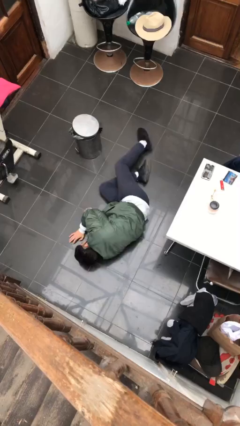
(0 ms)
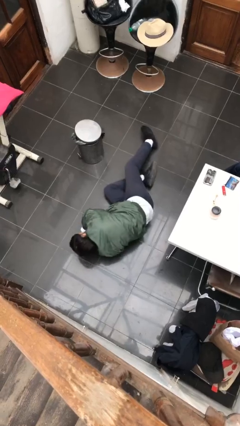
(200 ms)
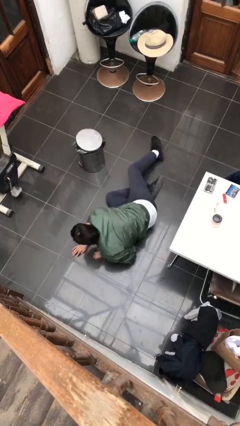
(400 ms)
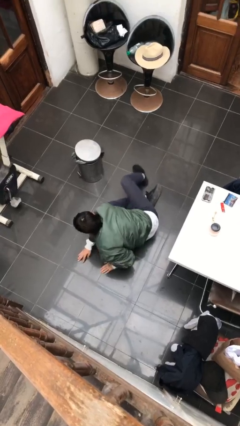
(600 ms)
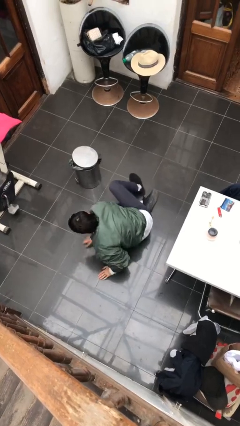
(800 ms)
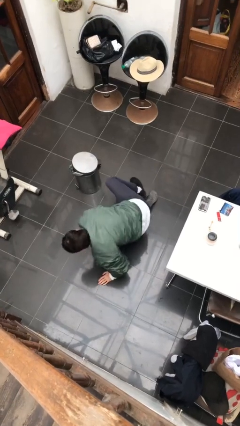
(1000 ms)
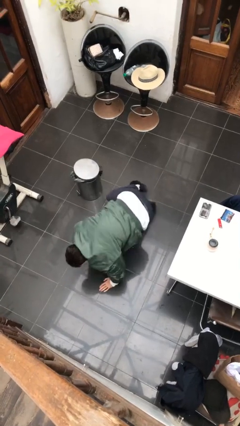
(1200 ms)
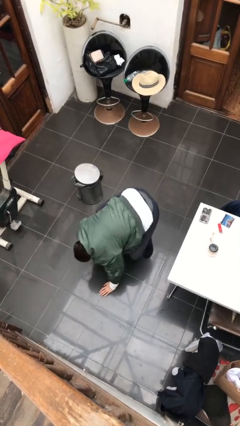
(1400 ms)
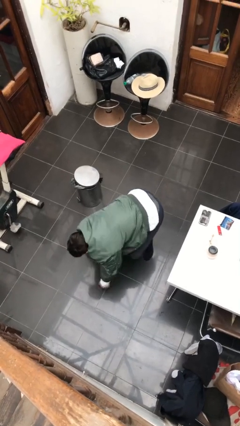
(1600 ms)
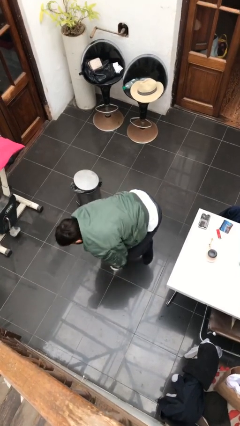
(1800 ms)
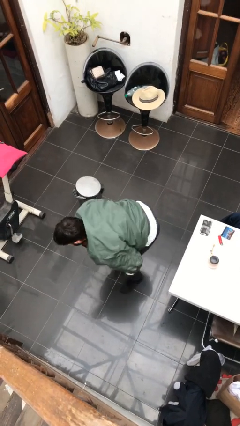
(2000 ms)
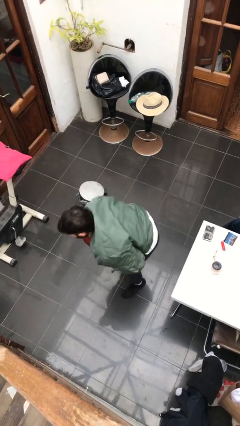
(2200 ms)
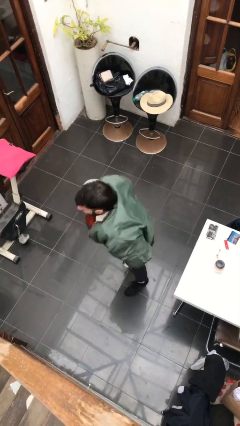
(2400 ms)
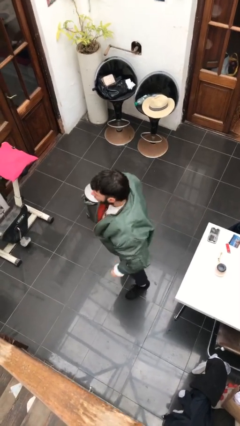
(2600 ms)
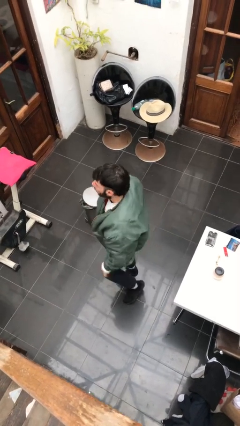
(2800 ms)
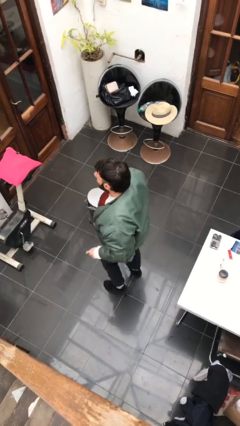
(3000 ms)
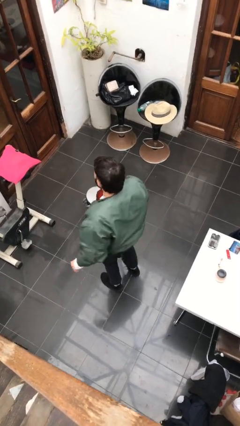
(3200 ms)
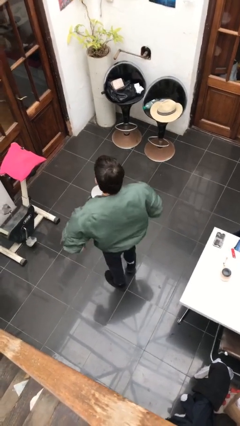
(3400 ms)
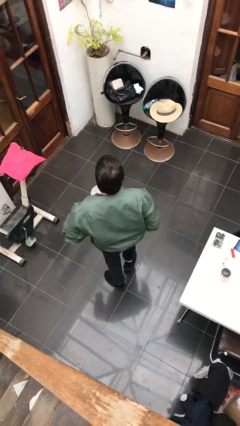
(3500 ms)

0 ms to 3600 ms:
person stands up from floor

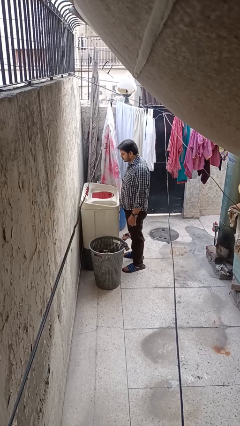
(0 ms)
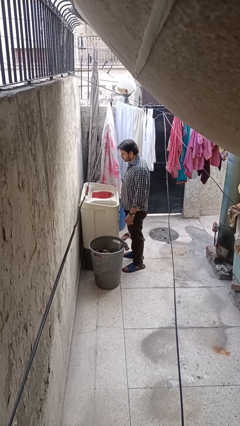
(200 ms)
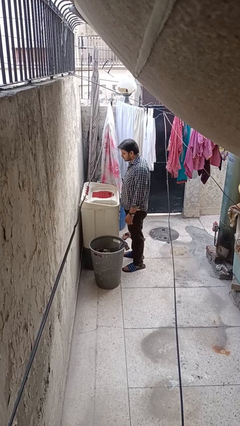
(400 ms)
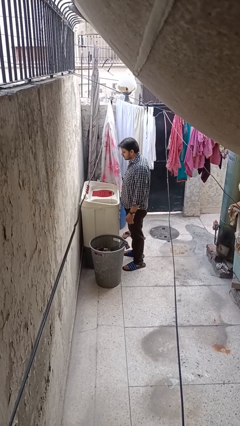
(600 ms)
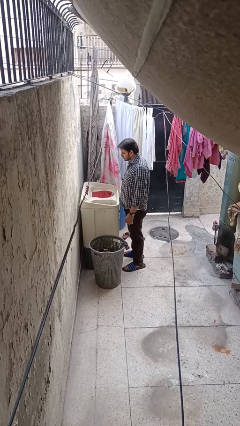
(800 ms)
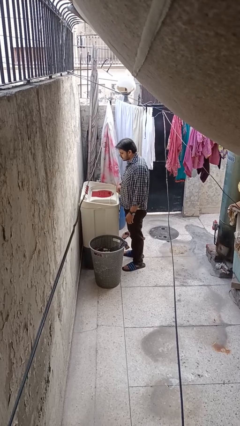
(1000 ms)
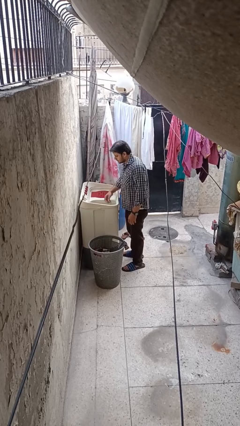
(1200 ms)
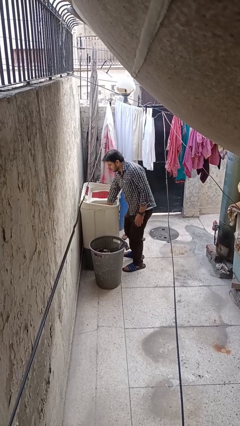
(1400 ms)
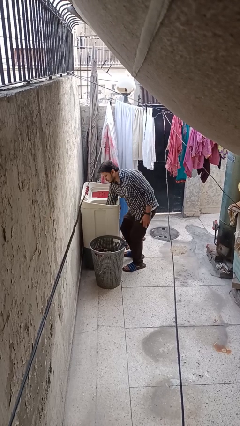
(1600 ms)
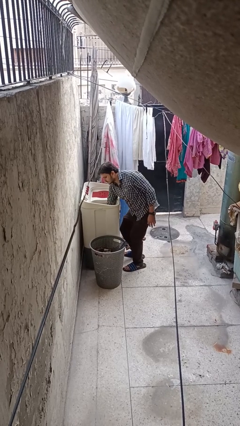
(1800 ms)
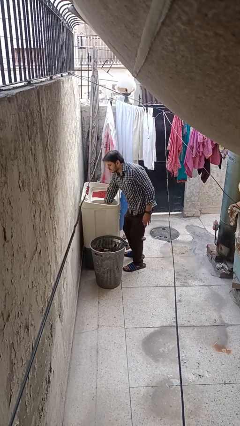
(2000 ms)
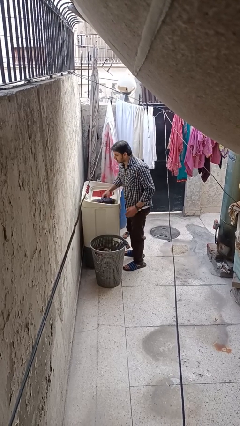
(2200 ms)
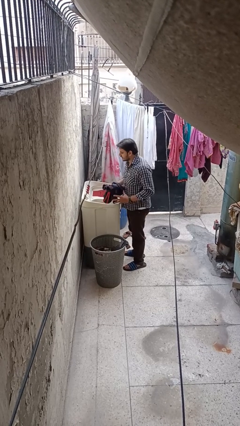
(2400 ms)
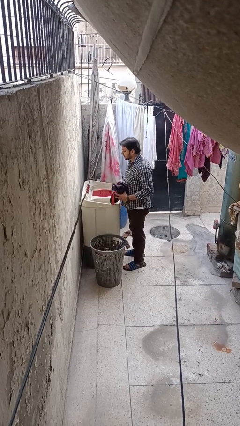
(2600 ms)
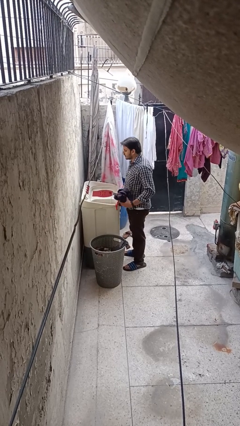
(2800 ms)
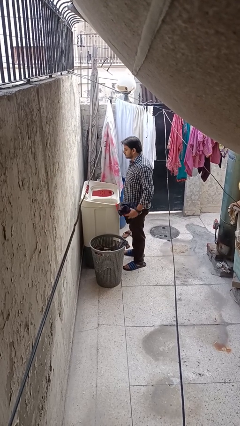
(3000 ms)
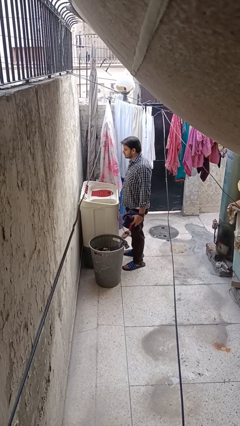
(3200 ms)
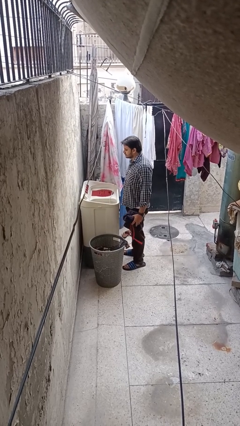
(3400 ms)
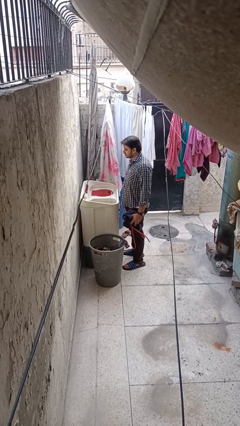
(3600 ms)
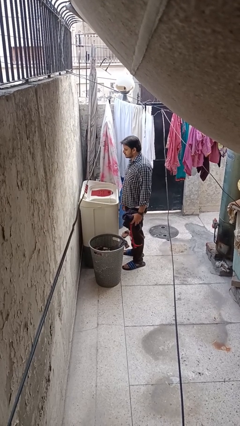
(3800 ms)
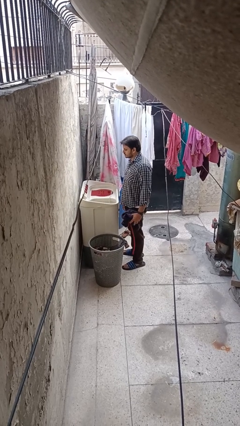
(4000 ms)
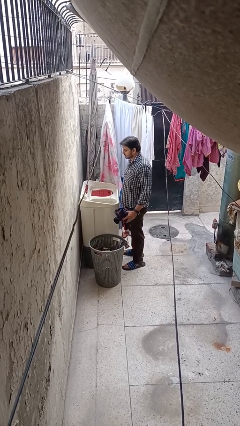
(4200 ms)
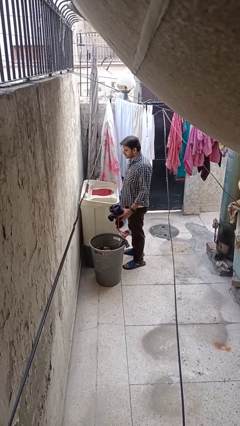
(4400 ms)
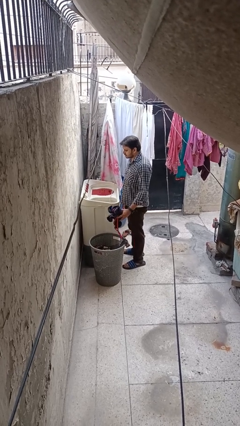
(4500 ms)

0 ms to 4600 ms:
person loads clotheswasher

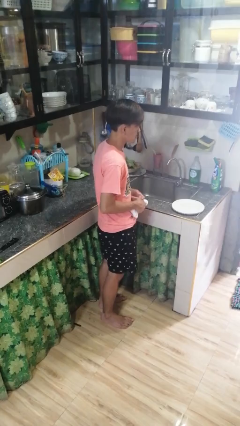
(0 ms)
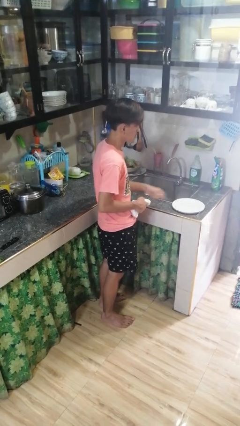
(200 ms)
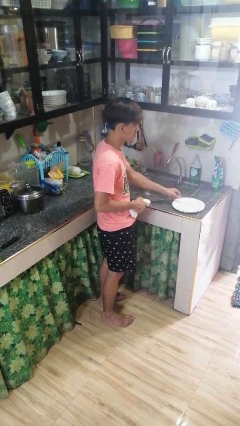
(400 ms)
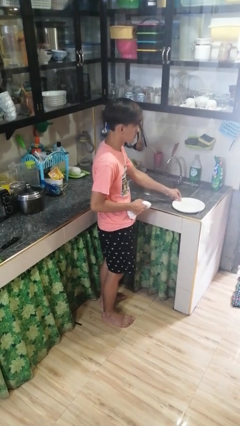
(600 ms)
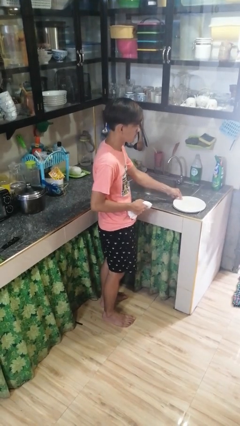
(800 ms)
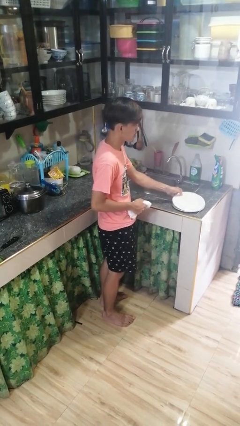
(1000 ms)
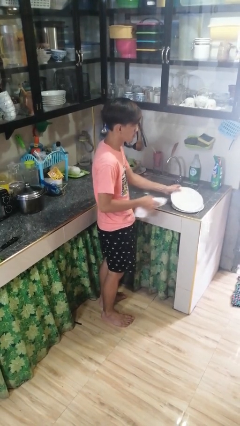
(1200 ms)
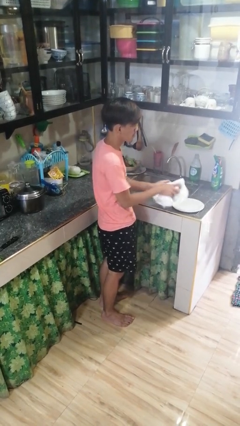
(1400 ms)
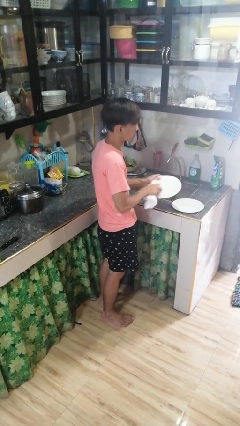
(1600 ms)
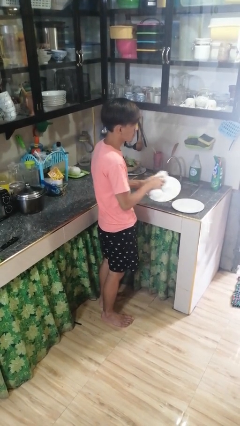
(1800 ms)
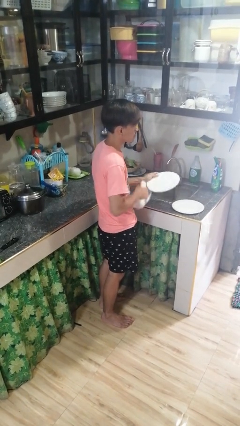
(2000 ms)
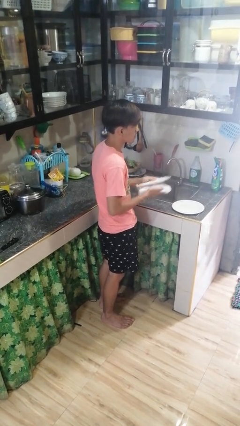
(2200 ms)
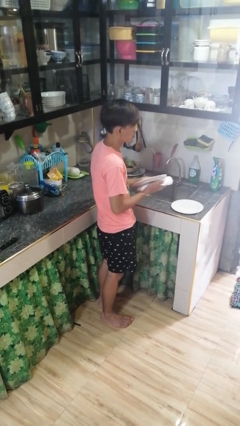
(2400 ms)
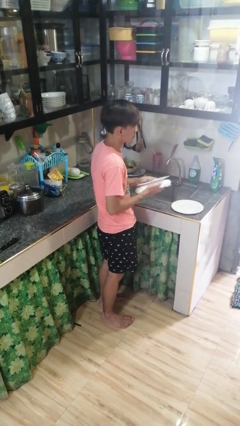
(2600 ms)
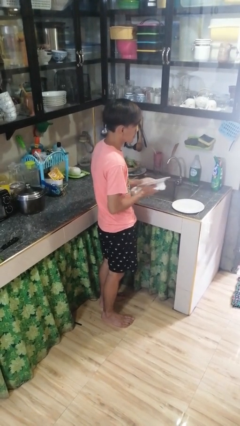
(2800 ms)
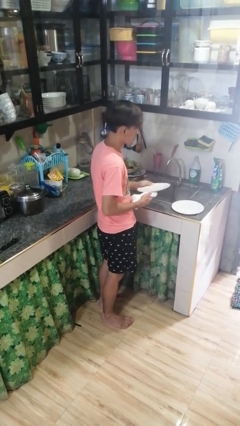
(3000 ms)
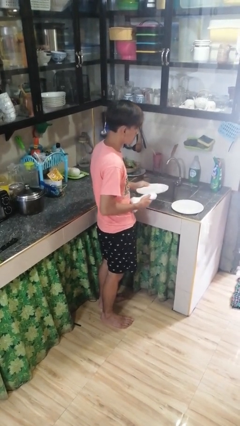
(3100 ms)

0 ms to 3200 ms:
person dries dish

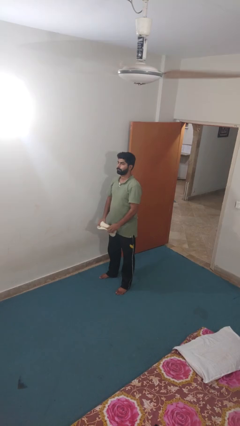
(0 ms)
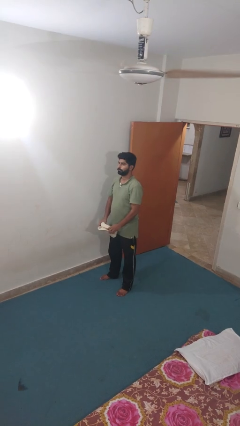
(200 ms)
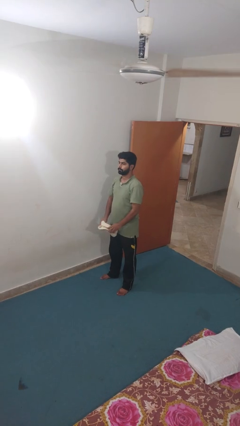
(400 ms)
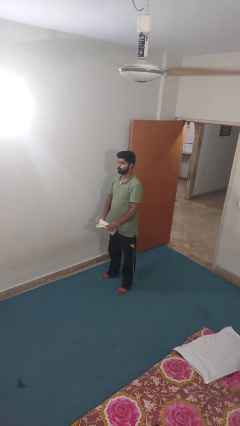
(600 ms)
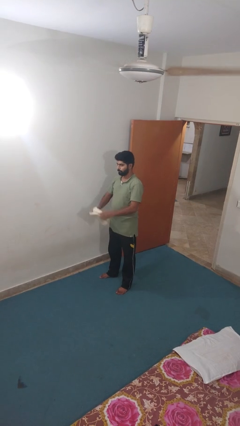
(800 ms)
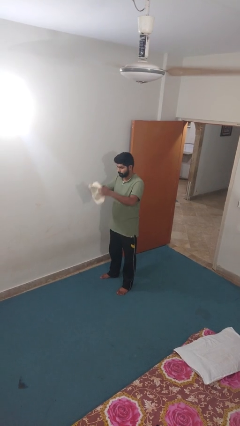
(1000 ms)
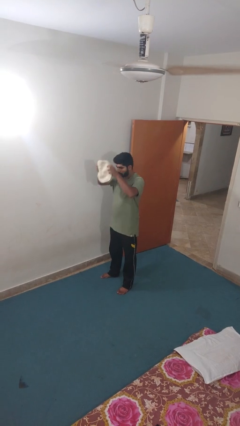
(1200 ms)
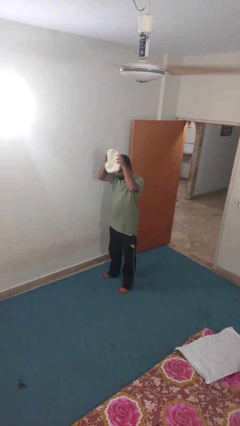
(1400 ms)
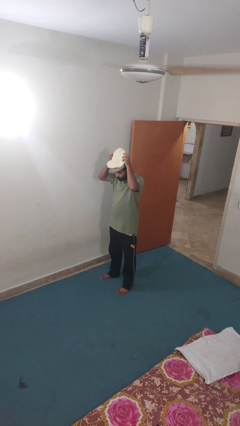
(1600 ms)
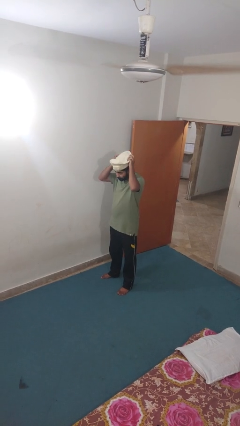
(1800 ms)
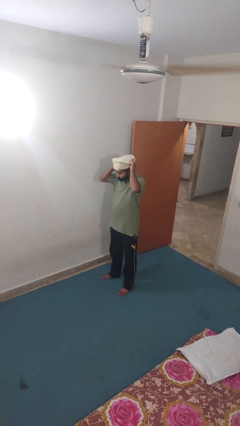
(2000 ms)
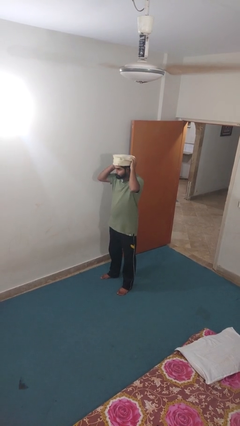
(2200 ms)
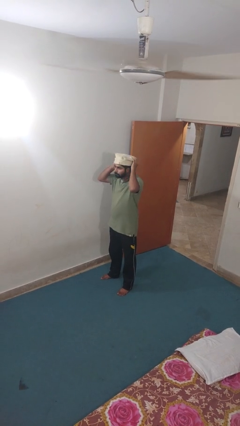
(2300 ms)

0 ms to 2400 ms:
person puts on hat

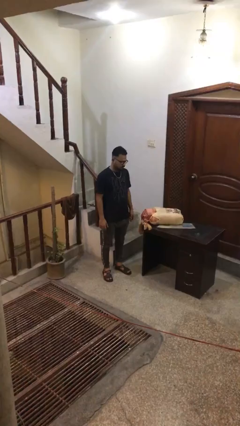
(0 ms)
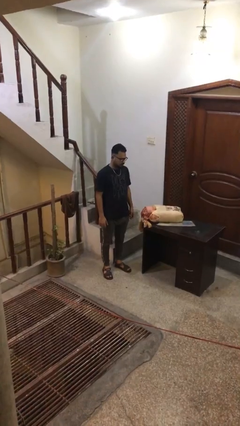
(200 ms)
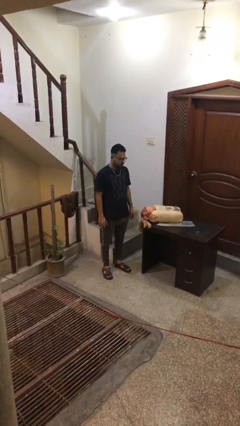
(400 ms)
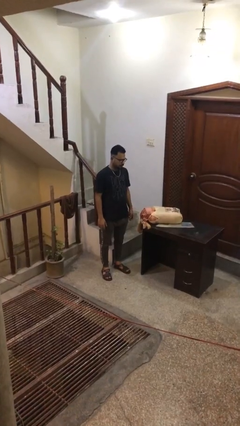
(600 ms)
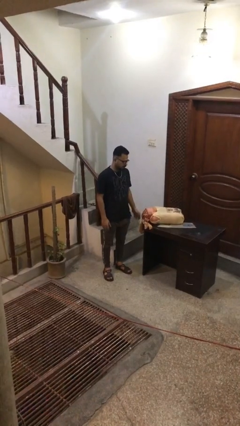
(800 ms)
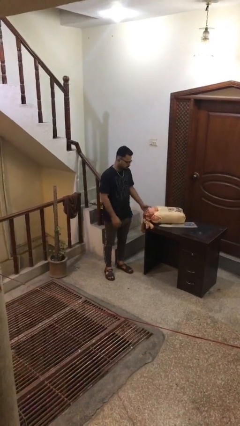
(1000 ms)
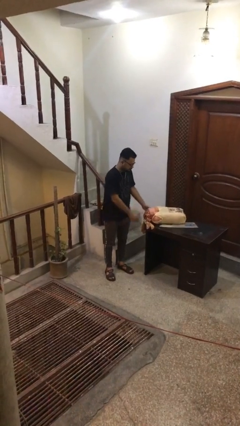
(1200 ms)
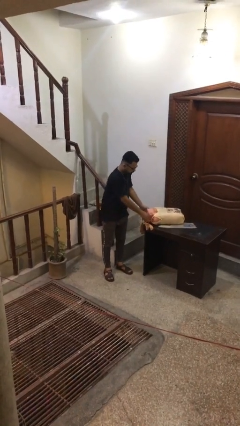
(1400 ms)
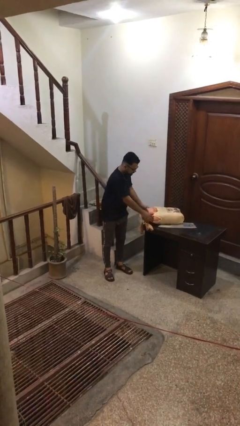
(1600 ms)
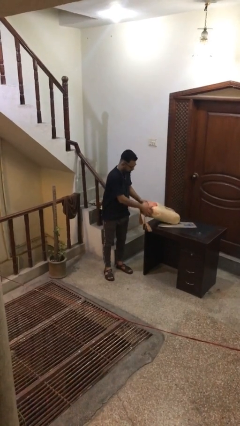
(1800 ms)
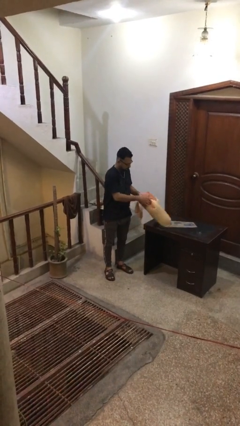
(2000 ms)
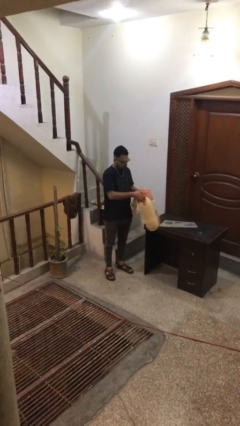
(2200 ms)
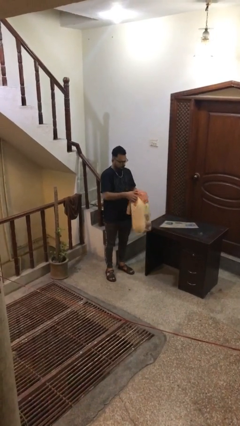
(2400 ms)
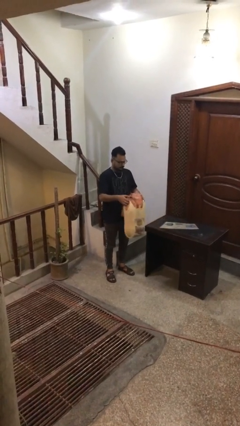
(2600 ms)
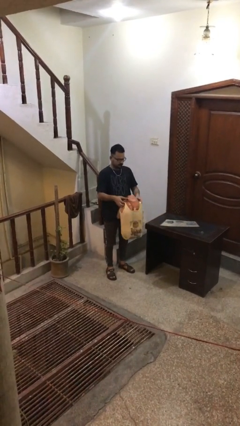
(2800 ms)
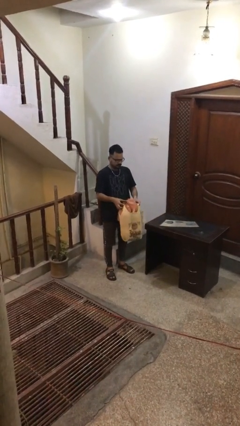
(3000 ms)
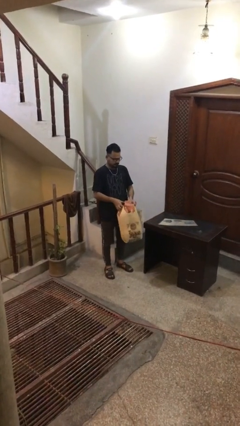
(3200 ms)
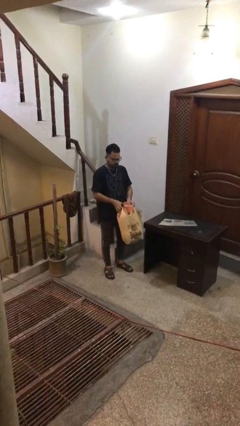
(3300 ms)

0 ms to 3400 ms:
person picks up object from table

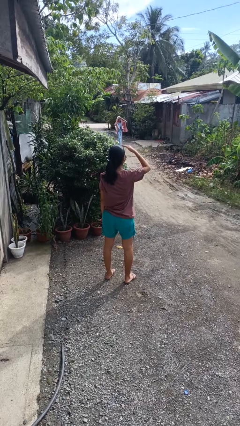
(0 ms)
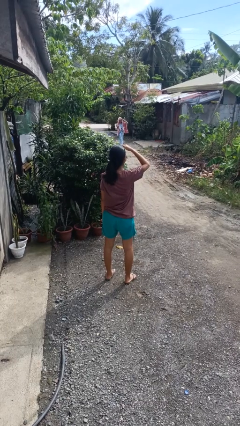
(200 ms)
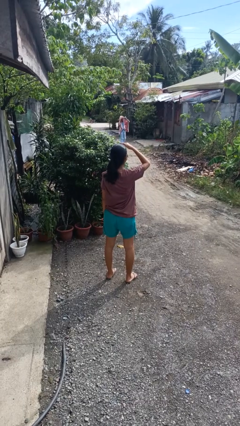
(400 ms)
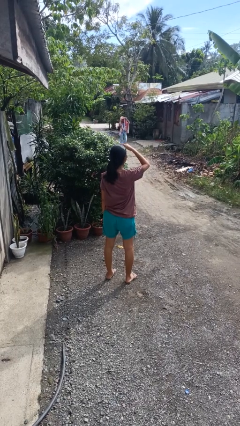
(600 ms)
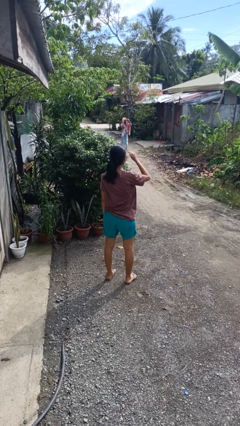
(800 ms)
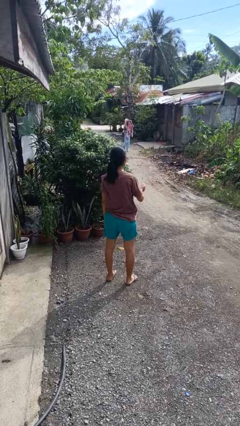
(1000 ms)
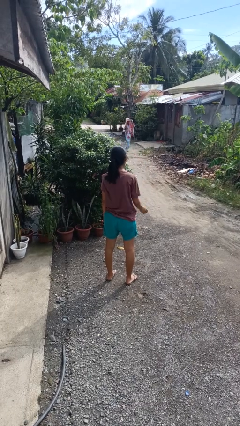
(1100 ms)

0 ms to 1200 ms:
person shades eyes
